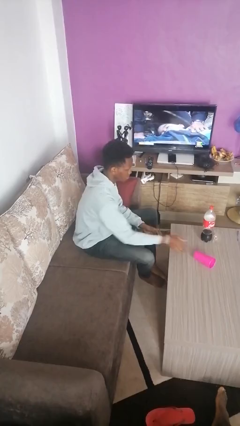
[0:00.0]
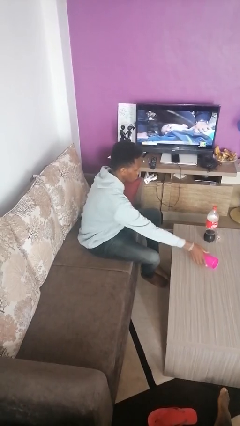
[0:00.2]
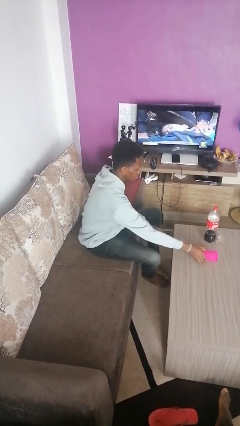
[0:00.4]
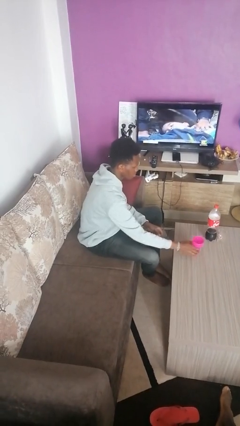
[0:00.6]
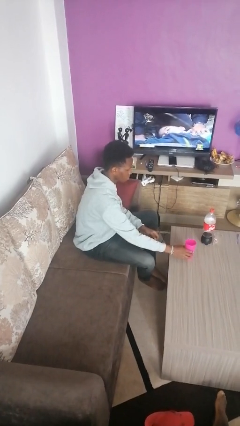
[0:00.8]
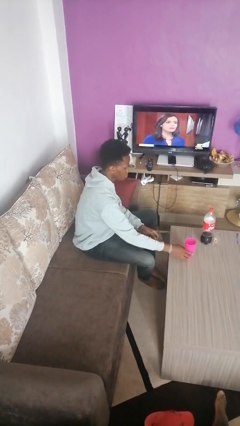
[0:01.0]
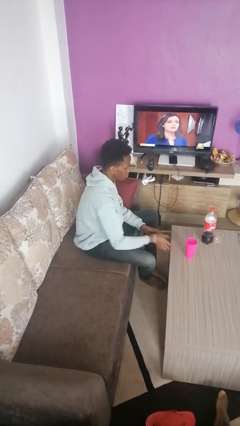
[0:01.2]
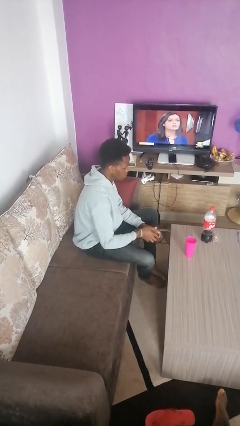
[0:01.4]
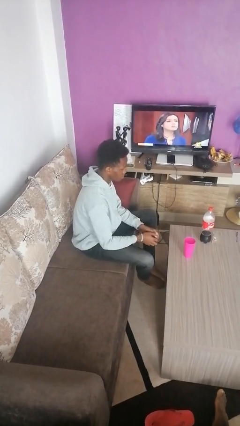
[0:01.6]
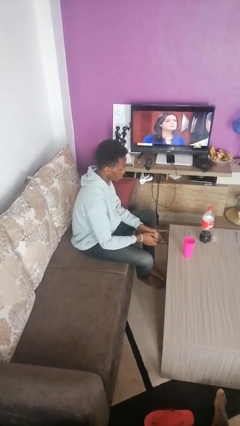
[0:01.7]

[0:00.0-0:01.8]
person sets upright glass

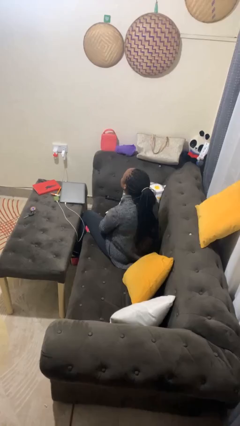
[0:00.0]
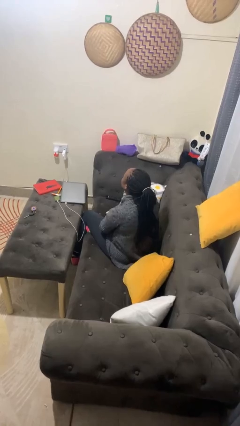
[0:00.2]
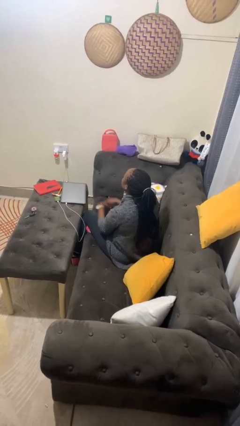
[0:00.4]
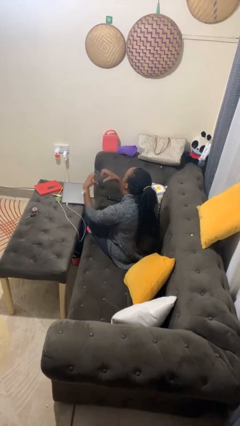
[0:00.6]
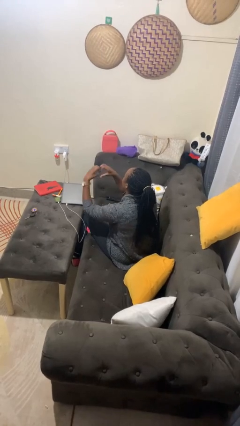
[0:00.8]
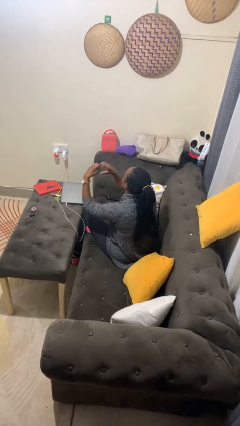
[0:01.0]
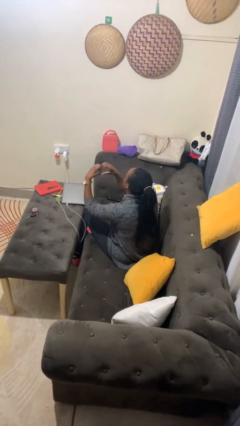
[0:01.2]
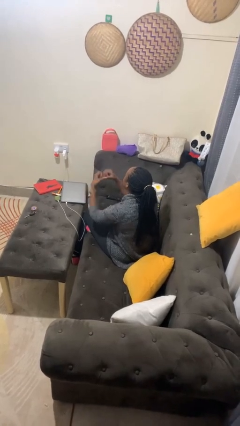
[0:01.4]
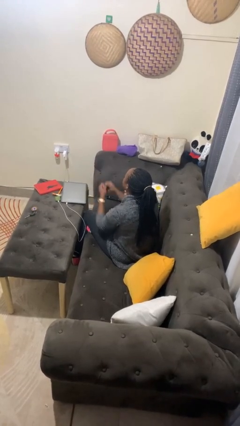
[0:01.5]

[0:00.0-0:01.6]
person gestures heart

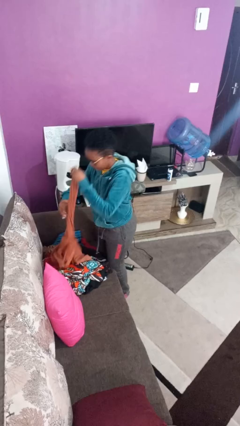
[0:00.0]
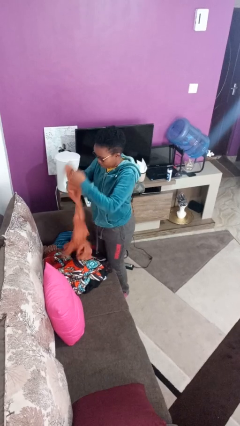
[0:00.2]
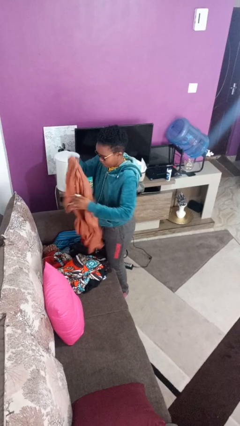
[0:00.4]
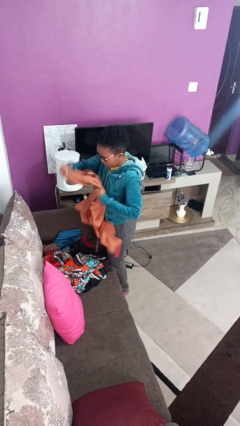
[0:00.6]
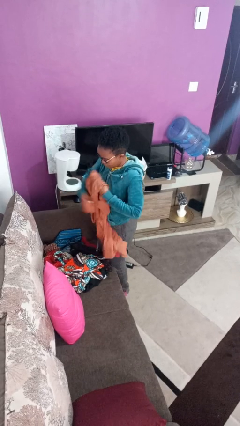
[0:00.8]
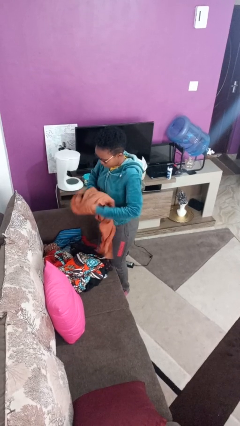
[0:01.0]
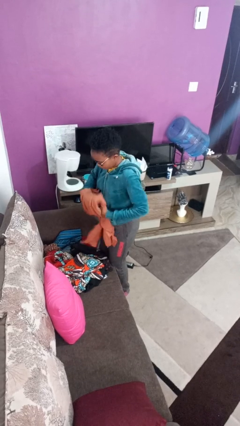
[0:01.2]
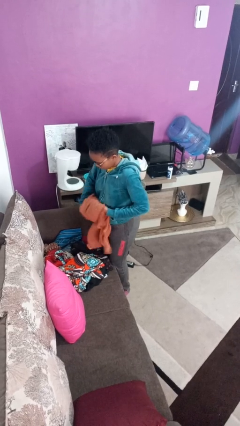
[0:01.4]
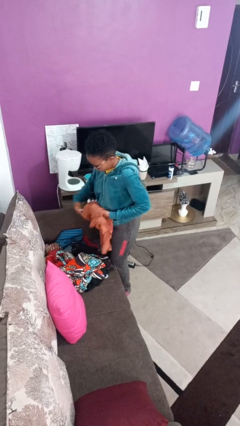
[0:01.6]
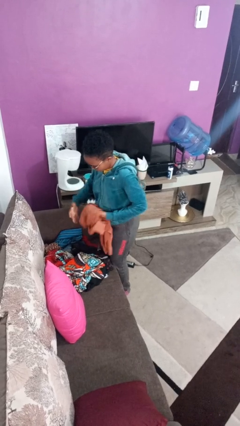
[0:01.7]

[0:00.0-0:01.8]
person folds shirt

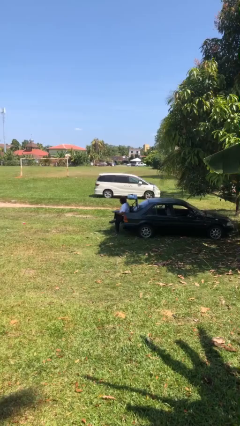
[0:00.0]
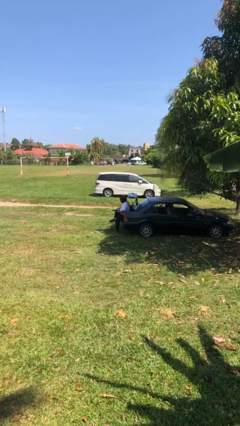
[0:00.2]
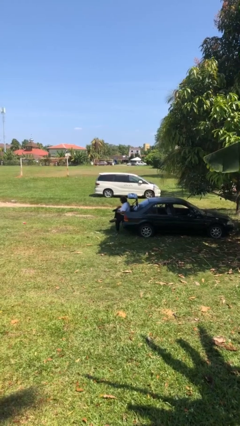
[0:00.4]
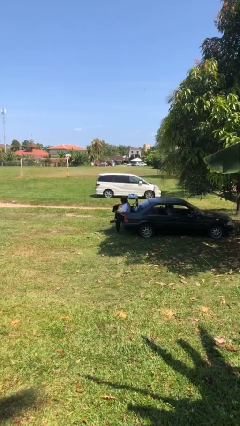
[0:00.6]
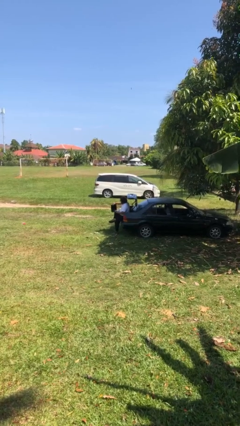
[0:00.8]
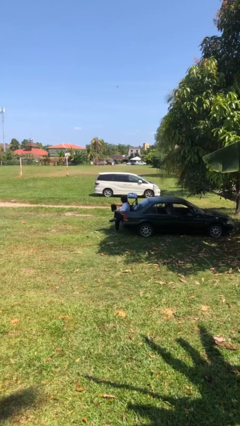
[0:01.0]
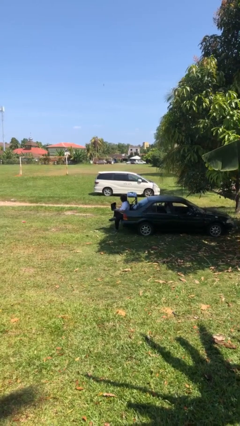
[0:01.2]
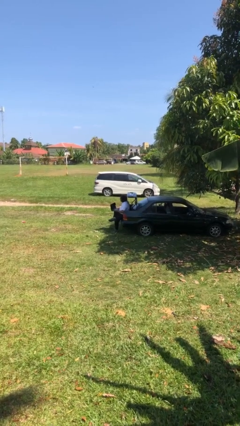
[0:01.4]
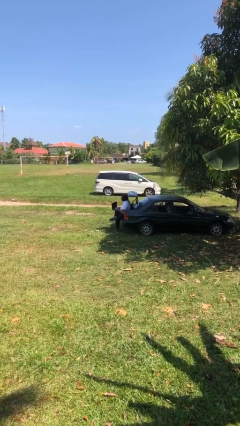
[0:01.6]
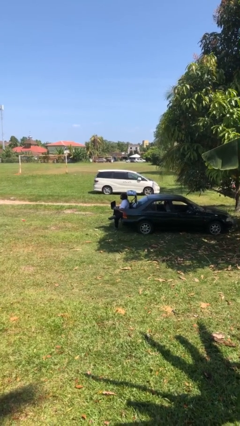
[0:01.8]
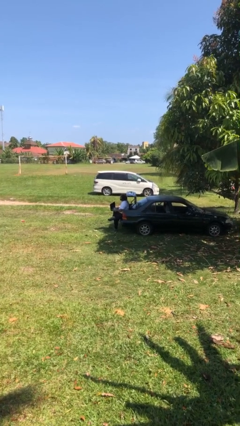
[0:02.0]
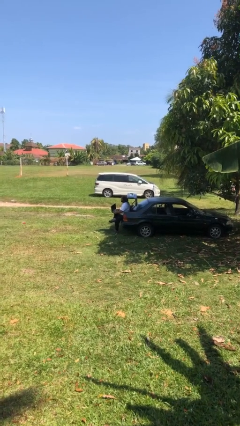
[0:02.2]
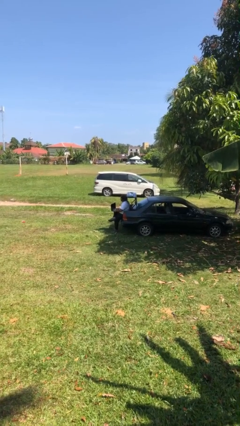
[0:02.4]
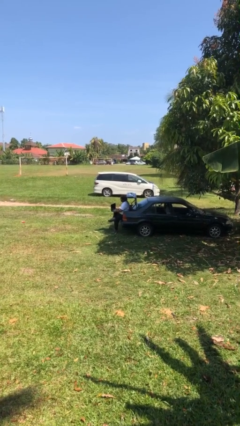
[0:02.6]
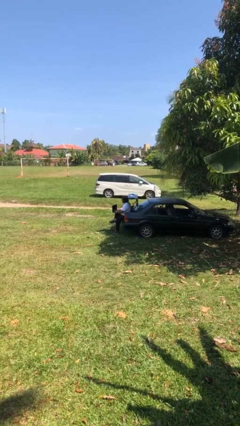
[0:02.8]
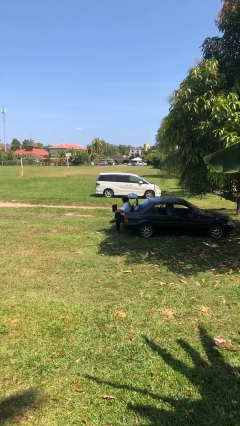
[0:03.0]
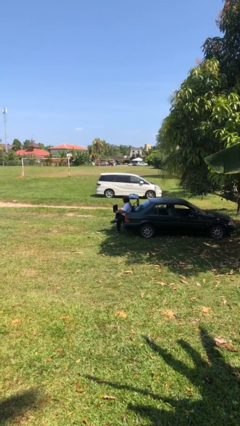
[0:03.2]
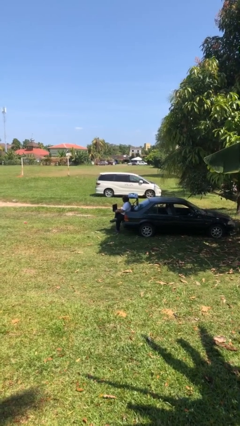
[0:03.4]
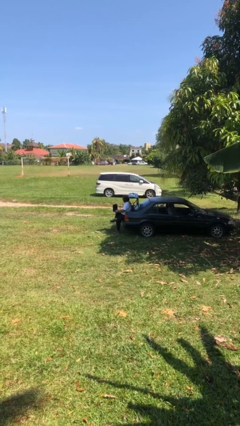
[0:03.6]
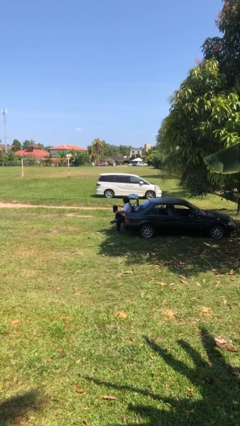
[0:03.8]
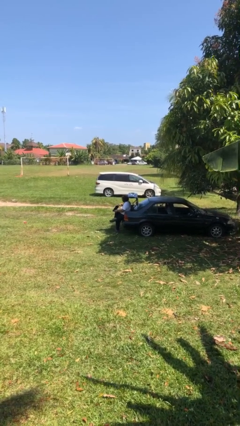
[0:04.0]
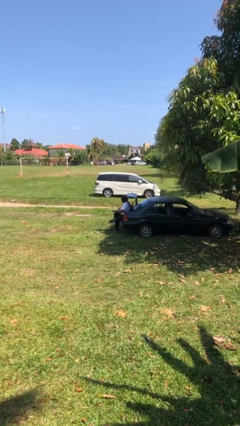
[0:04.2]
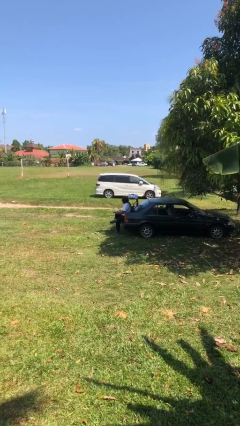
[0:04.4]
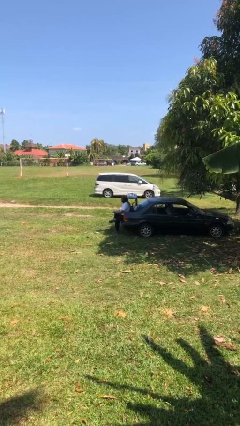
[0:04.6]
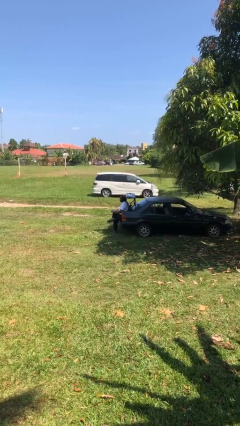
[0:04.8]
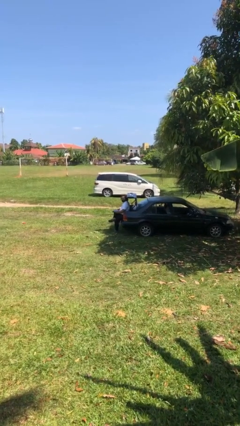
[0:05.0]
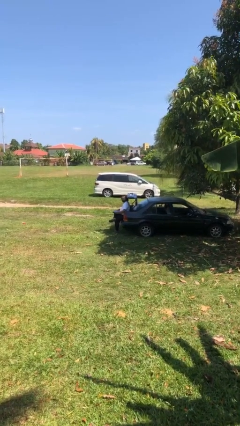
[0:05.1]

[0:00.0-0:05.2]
person interacts with laptop

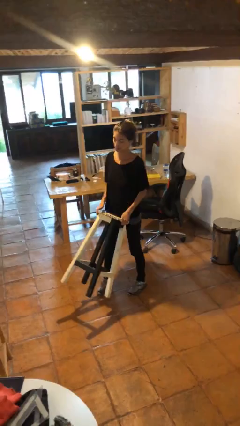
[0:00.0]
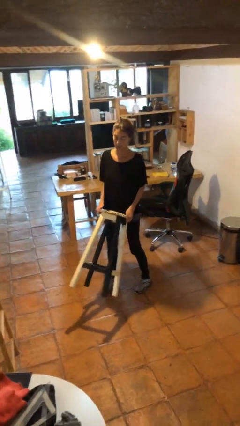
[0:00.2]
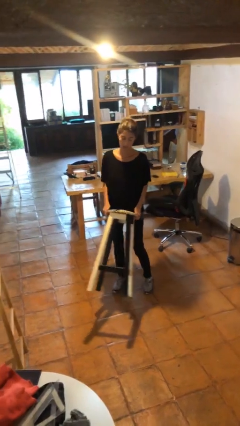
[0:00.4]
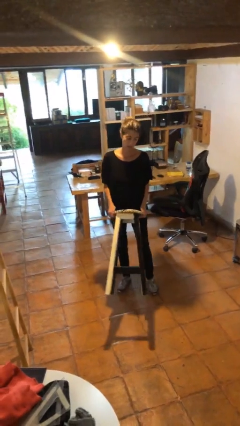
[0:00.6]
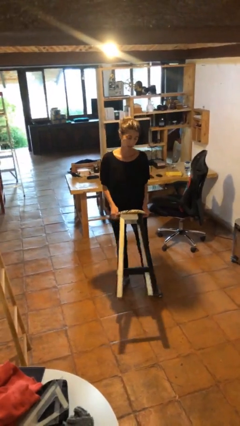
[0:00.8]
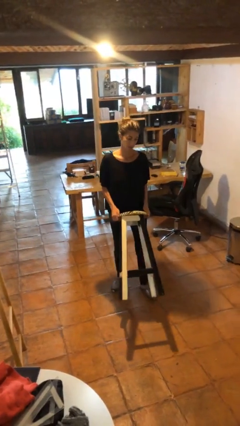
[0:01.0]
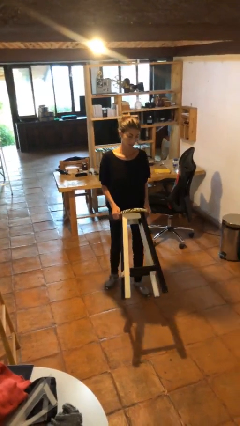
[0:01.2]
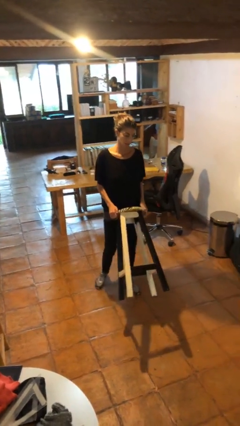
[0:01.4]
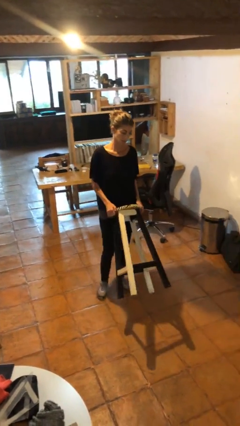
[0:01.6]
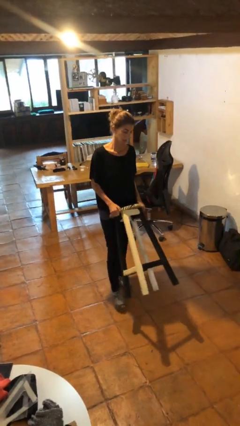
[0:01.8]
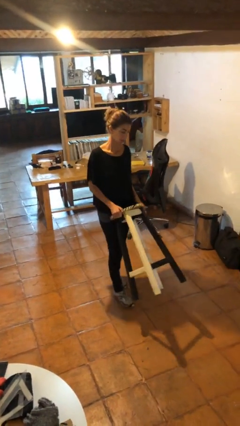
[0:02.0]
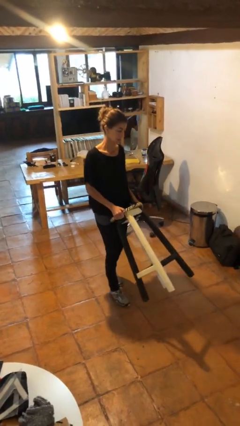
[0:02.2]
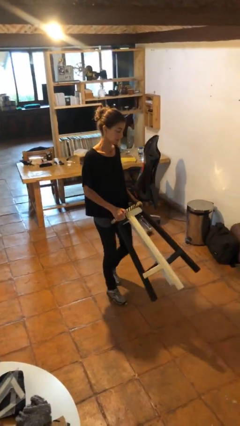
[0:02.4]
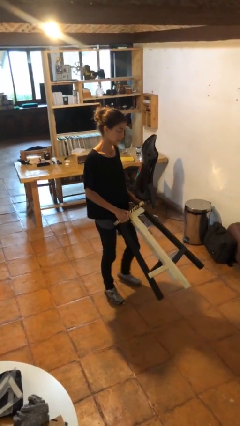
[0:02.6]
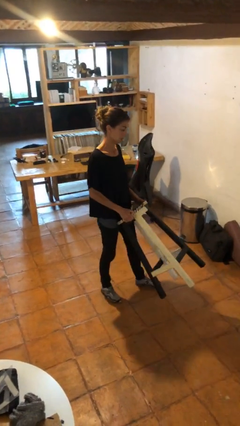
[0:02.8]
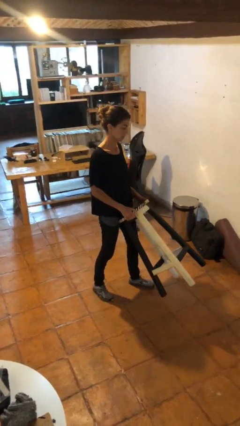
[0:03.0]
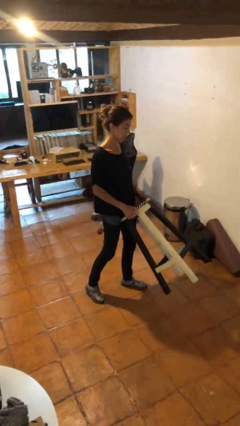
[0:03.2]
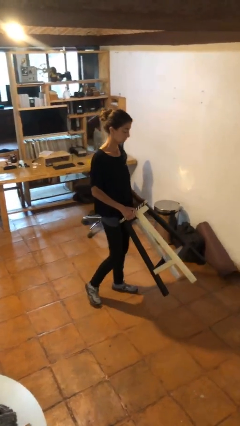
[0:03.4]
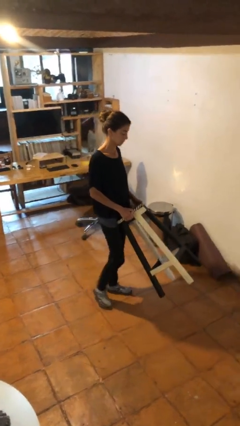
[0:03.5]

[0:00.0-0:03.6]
person carries furniture

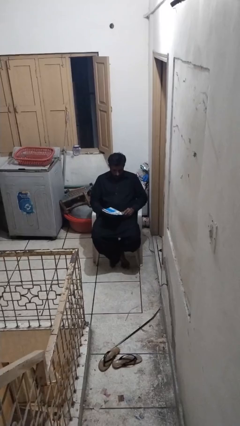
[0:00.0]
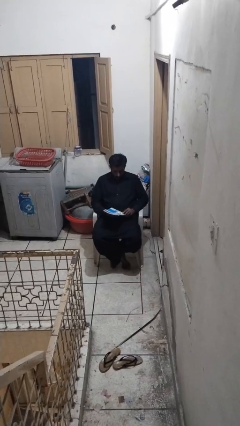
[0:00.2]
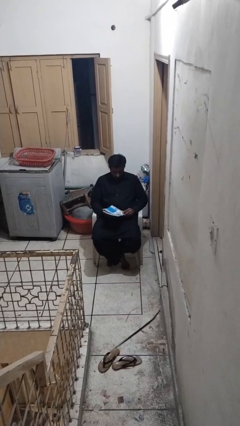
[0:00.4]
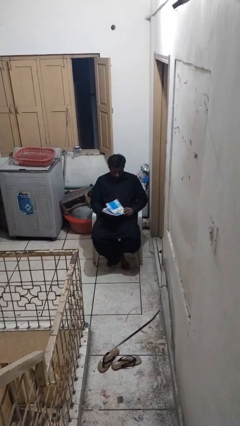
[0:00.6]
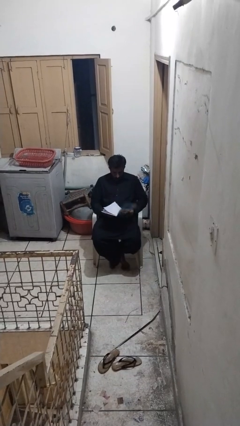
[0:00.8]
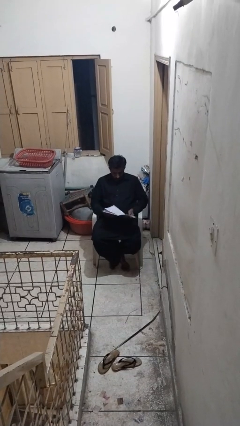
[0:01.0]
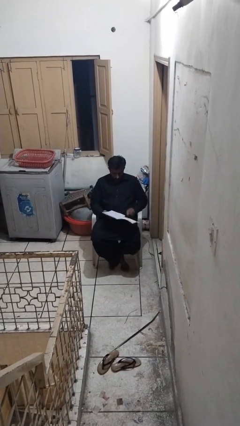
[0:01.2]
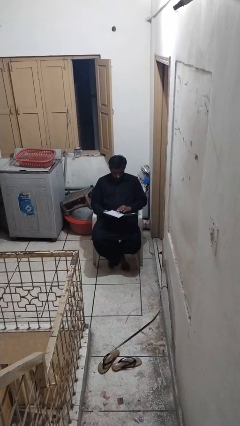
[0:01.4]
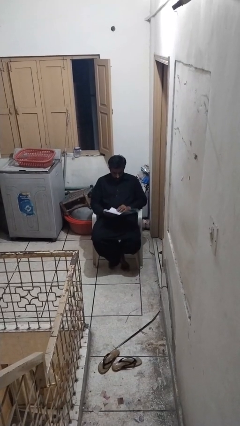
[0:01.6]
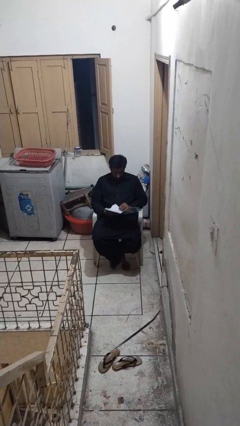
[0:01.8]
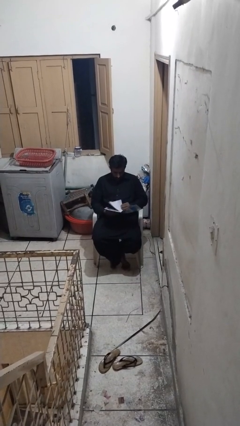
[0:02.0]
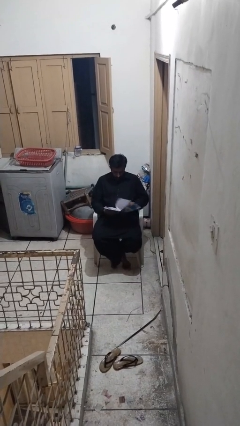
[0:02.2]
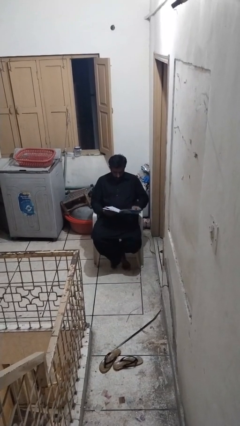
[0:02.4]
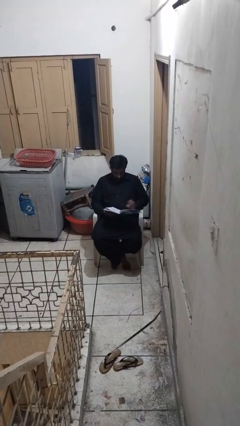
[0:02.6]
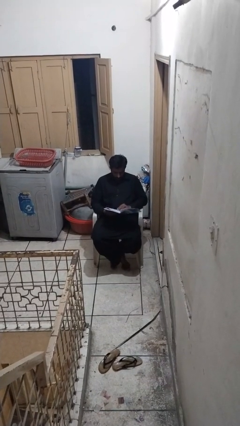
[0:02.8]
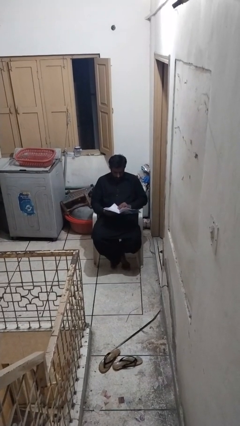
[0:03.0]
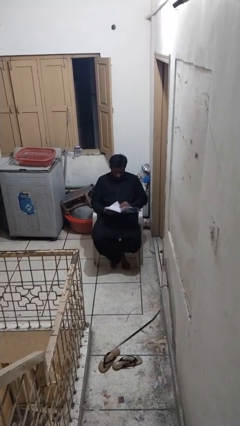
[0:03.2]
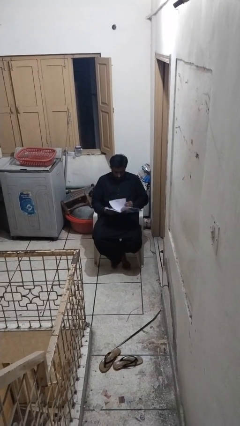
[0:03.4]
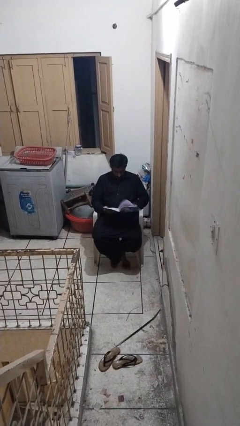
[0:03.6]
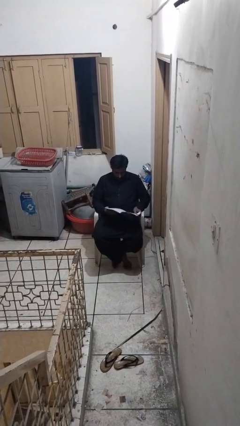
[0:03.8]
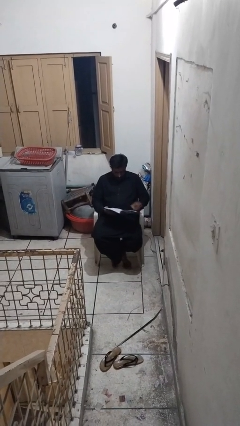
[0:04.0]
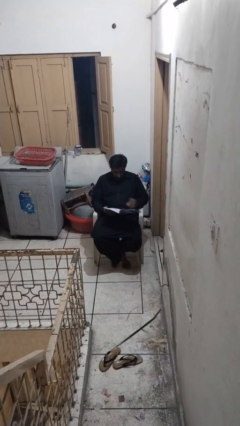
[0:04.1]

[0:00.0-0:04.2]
person reads book
